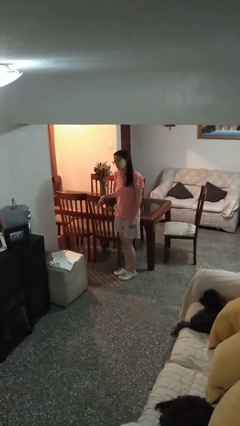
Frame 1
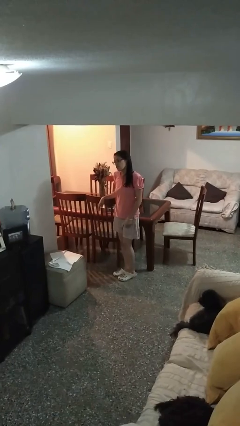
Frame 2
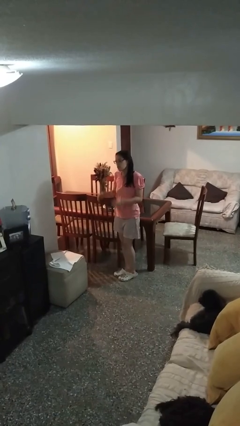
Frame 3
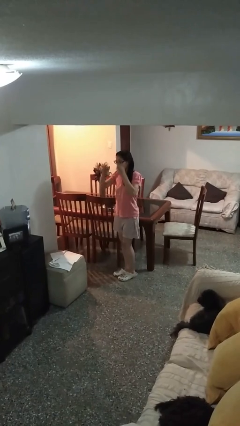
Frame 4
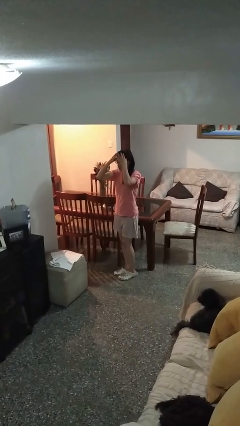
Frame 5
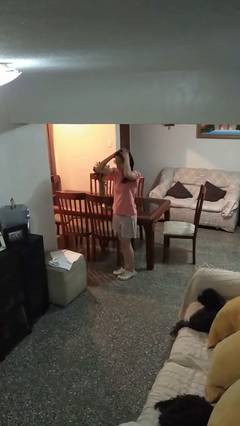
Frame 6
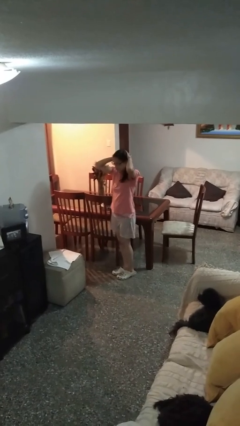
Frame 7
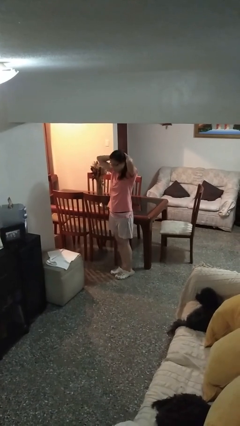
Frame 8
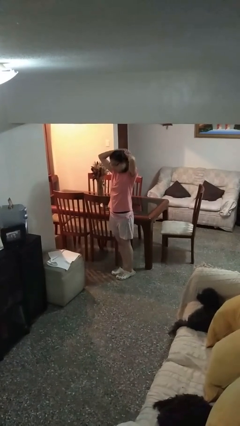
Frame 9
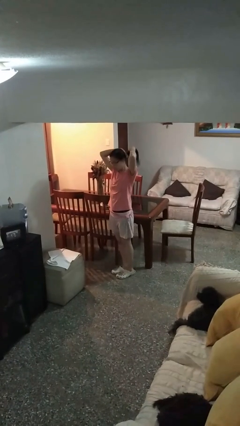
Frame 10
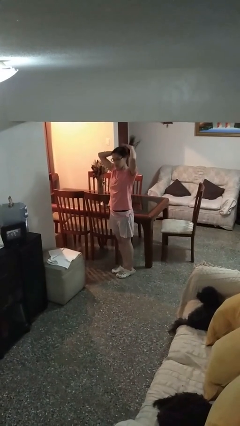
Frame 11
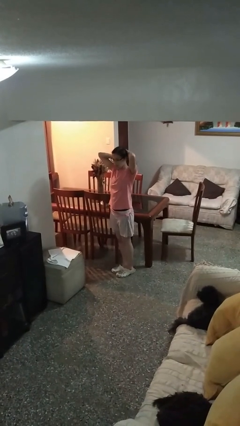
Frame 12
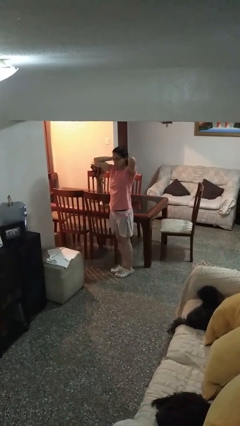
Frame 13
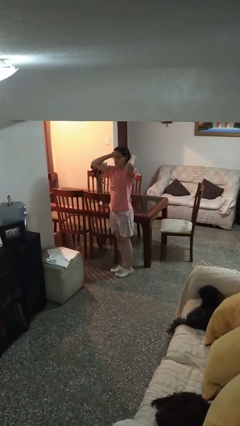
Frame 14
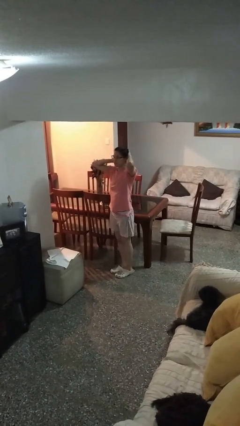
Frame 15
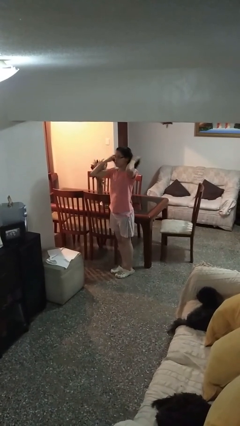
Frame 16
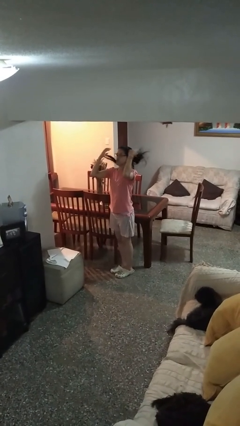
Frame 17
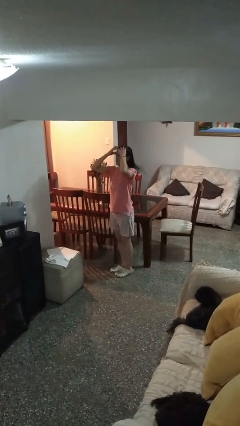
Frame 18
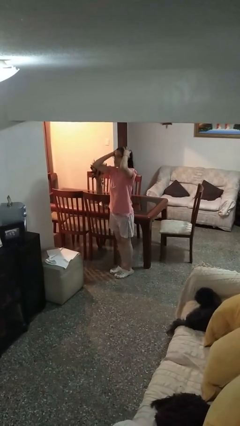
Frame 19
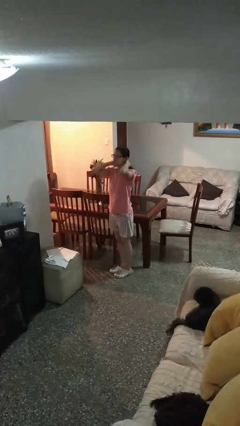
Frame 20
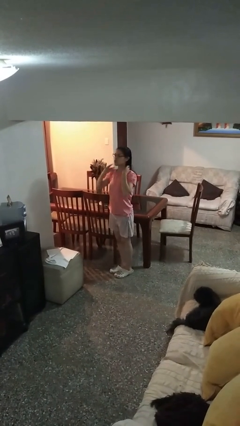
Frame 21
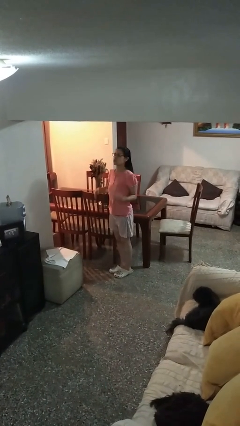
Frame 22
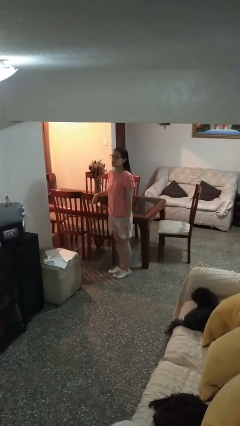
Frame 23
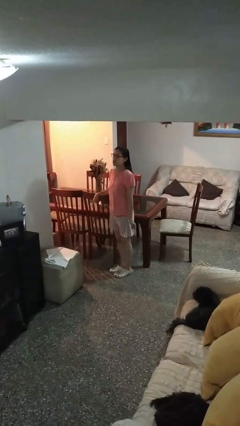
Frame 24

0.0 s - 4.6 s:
person strokes hair

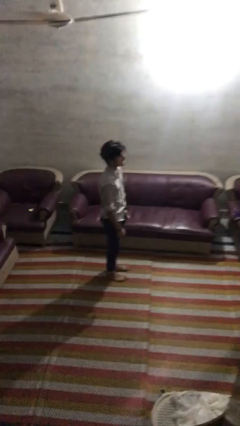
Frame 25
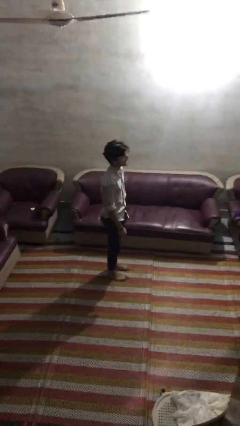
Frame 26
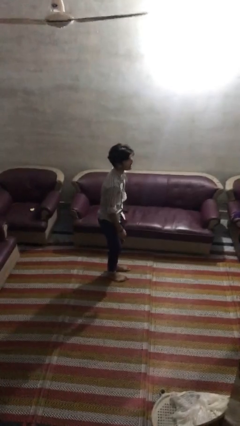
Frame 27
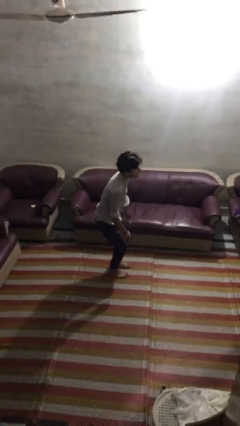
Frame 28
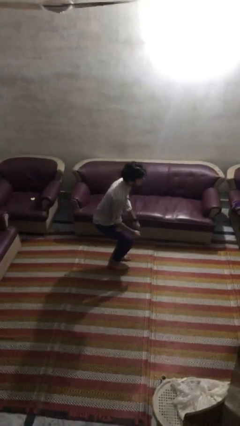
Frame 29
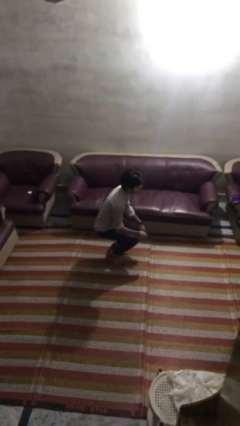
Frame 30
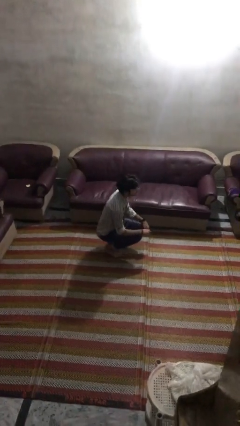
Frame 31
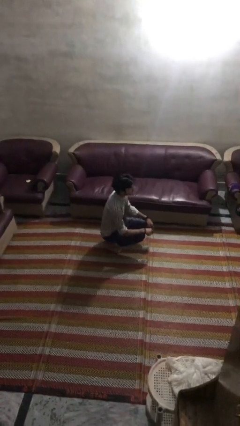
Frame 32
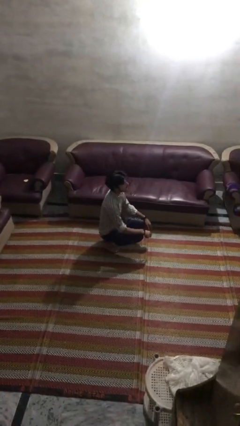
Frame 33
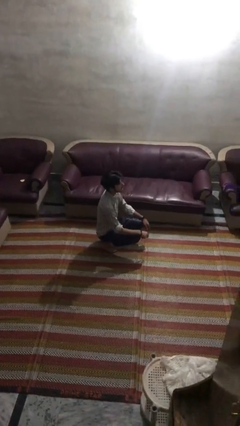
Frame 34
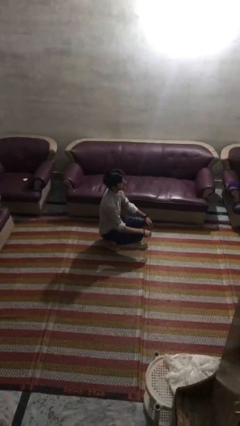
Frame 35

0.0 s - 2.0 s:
person squats

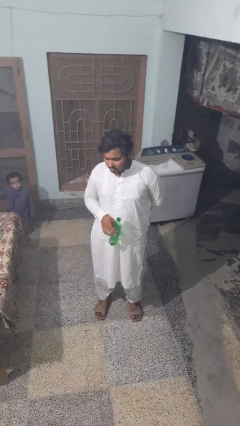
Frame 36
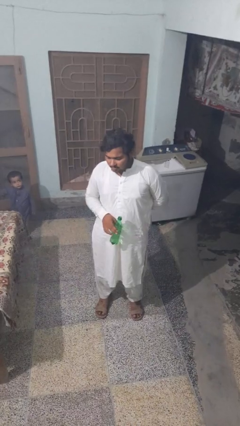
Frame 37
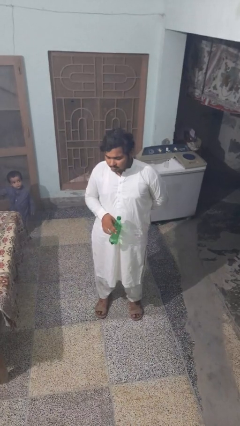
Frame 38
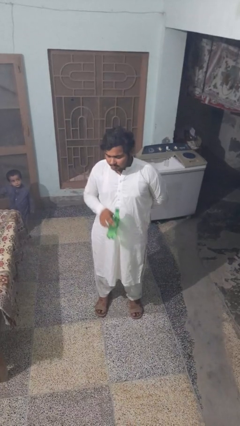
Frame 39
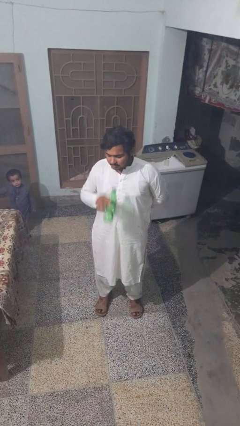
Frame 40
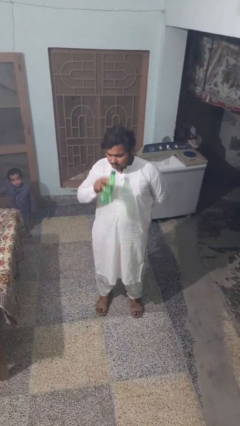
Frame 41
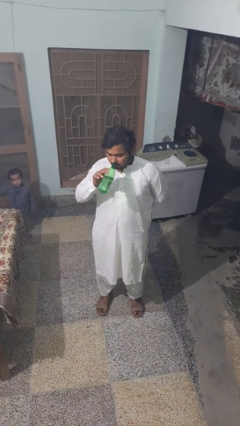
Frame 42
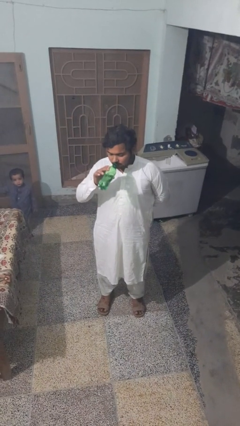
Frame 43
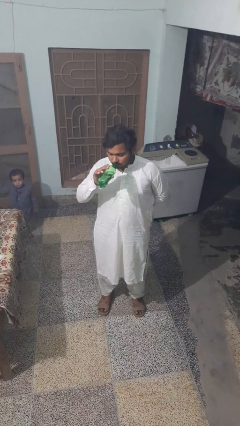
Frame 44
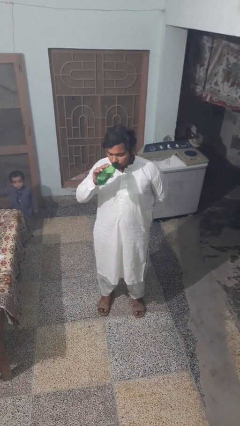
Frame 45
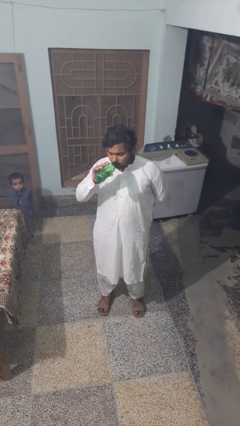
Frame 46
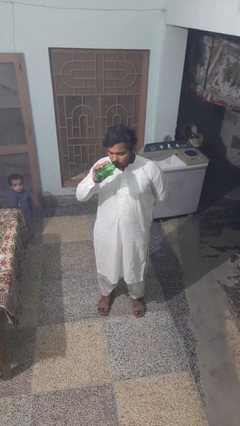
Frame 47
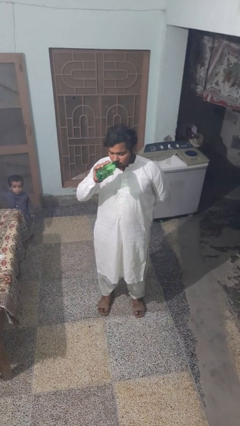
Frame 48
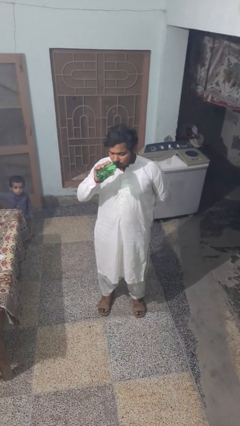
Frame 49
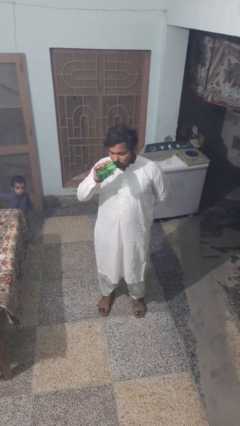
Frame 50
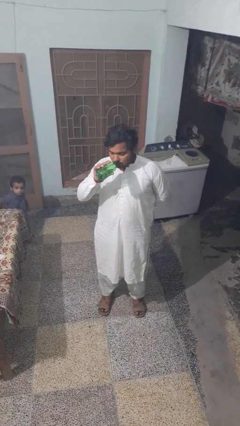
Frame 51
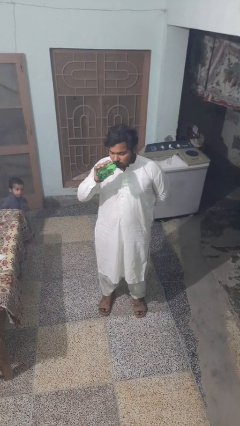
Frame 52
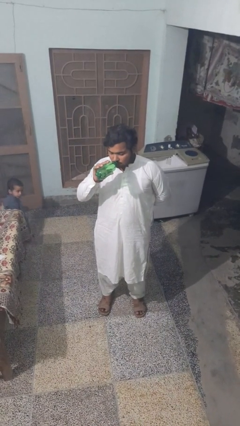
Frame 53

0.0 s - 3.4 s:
person drinks from bottle

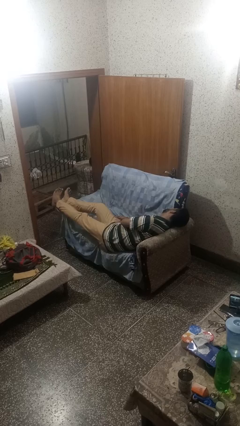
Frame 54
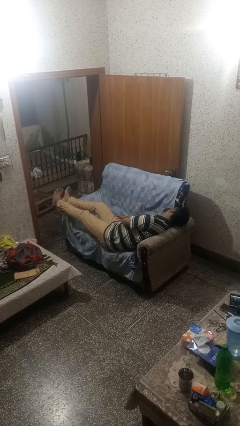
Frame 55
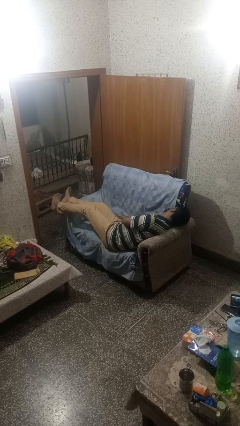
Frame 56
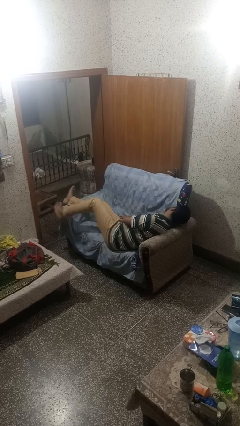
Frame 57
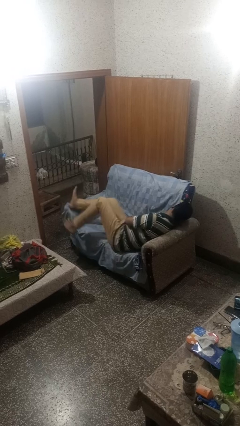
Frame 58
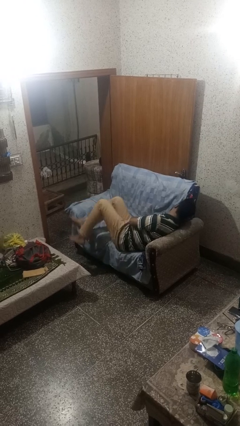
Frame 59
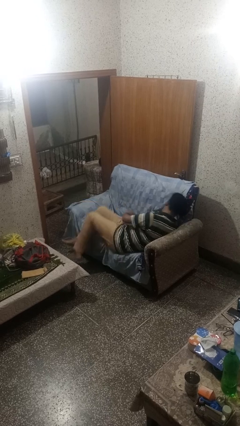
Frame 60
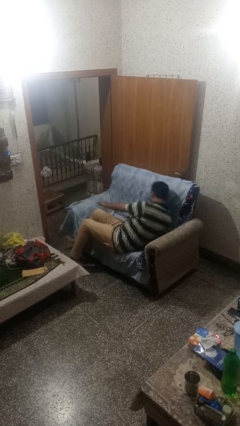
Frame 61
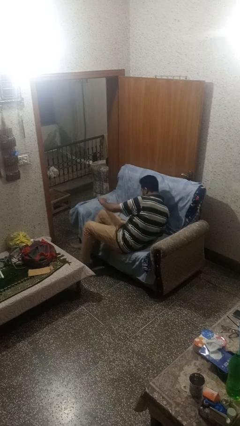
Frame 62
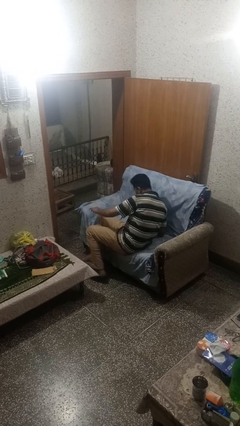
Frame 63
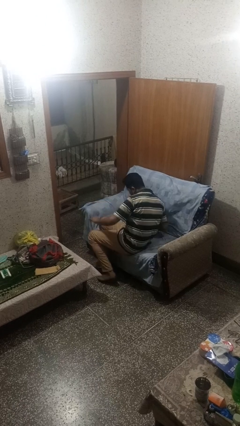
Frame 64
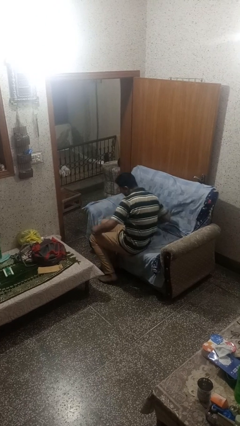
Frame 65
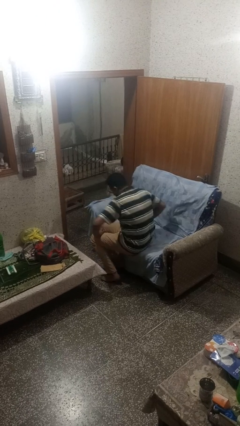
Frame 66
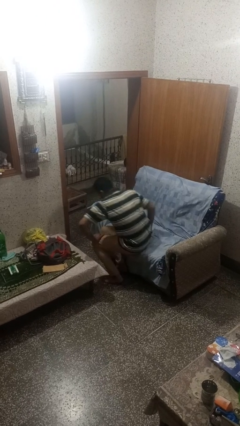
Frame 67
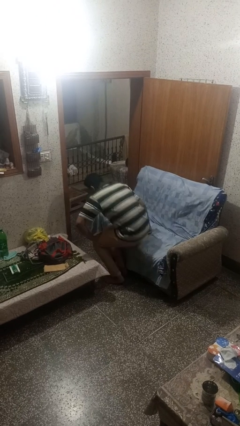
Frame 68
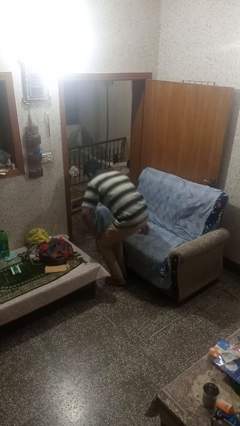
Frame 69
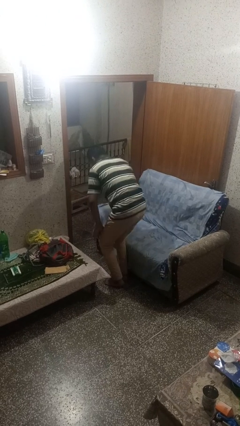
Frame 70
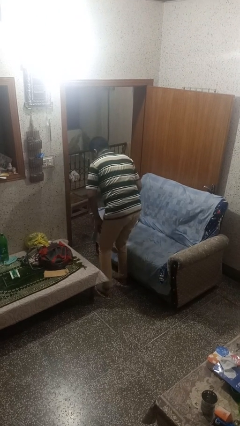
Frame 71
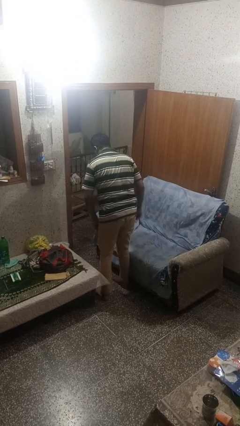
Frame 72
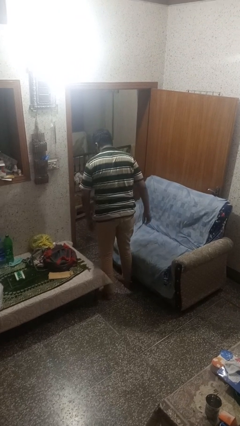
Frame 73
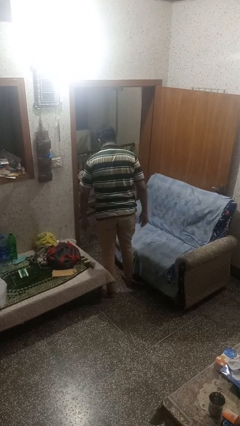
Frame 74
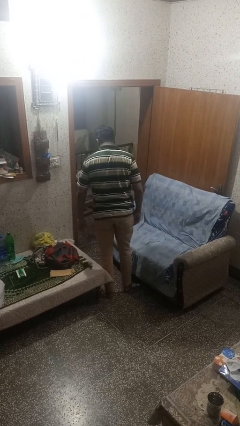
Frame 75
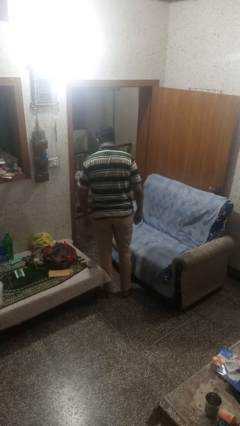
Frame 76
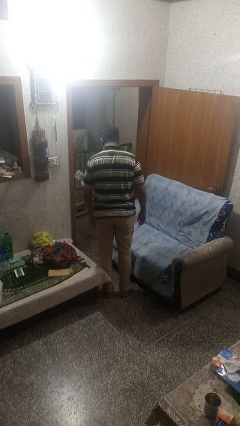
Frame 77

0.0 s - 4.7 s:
person stands up

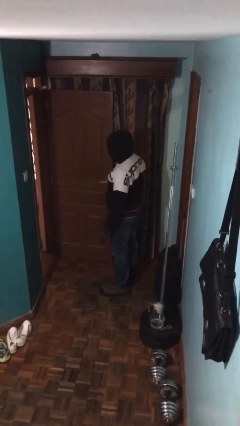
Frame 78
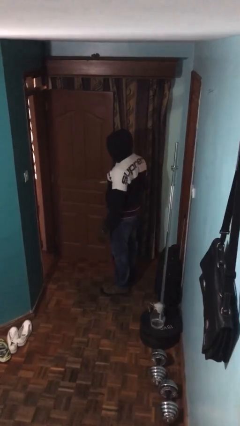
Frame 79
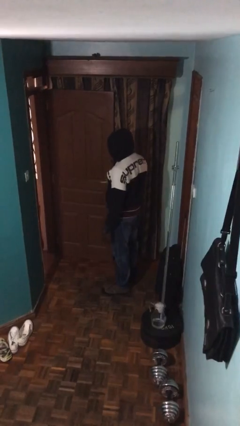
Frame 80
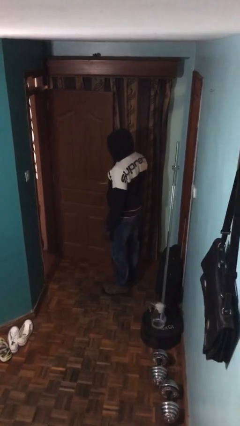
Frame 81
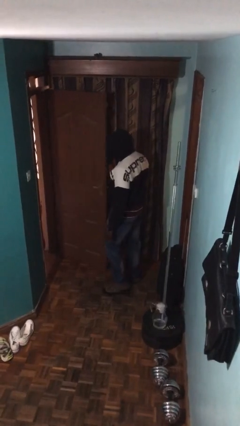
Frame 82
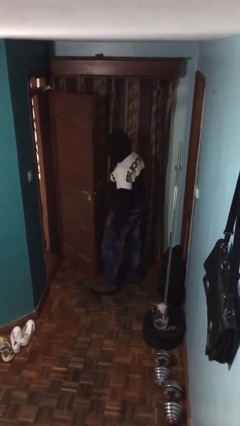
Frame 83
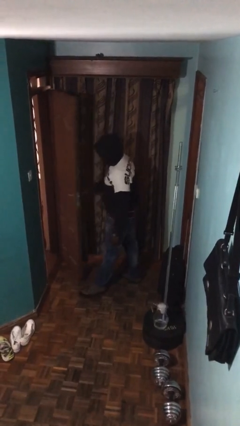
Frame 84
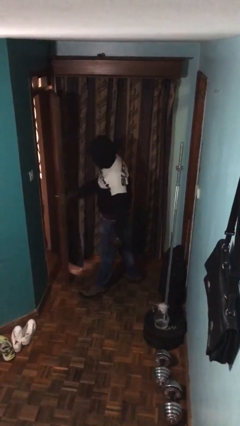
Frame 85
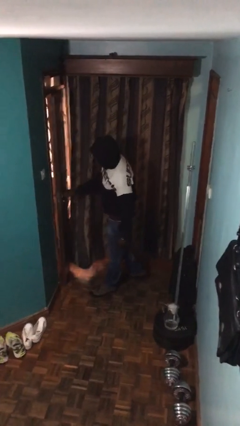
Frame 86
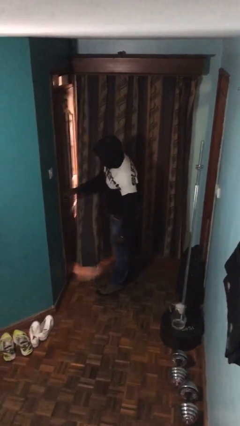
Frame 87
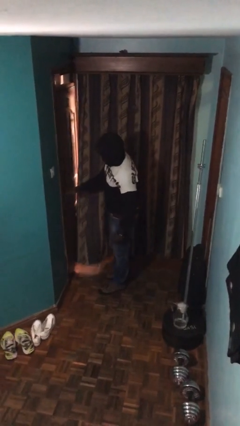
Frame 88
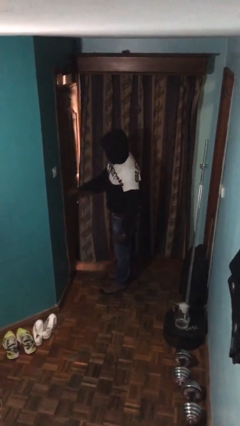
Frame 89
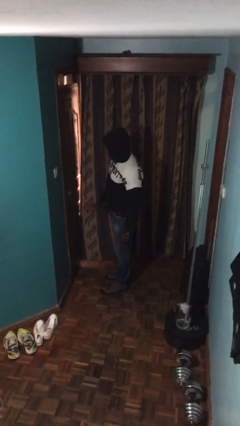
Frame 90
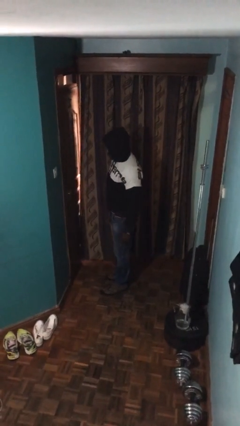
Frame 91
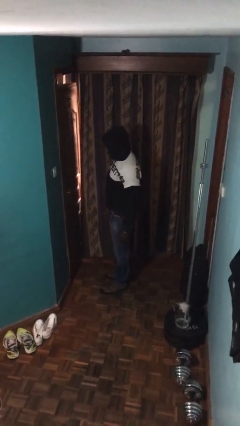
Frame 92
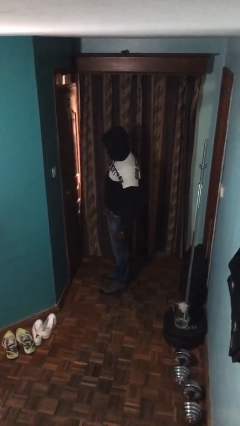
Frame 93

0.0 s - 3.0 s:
person closes facility door

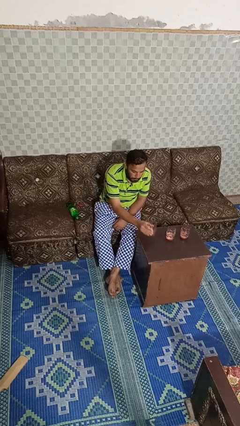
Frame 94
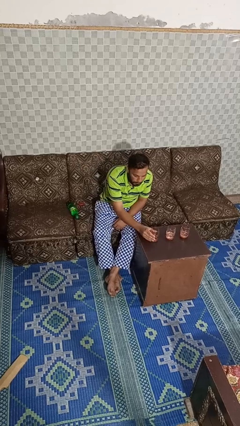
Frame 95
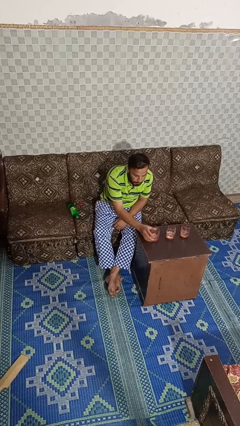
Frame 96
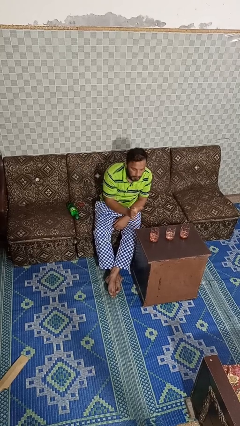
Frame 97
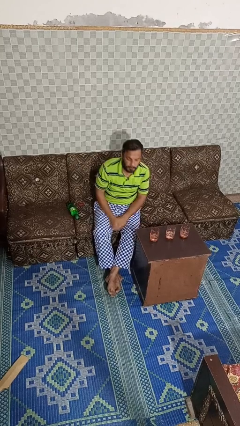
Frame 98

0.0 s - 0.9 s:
person puts down object on table
